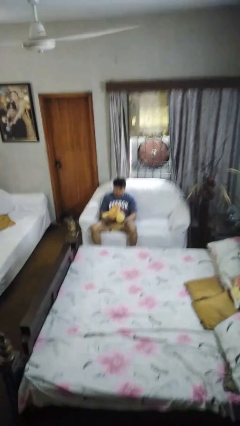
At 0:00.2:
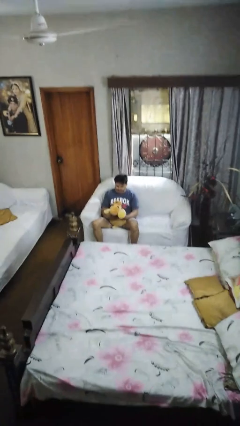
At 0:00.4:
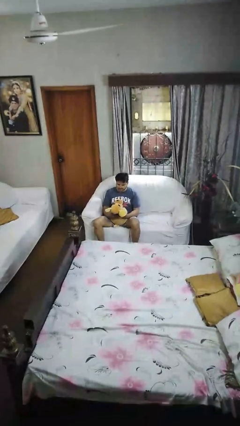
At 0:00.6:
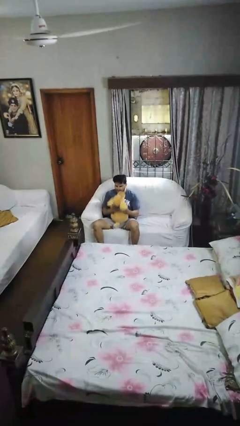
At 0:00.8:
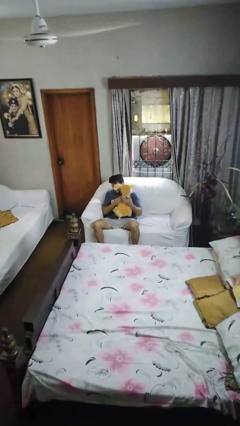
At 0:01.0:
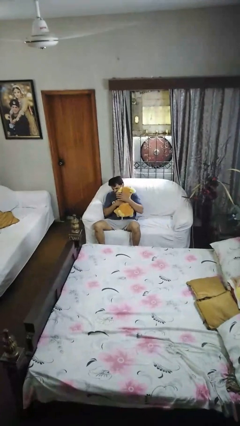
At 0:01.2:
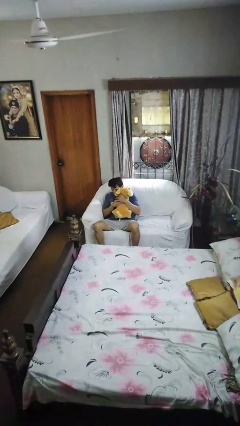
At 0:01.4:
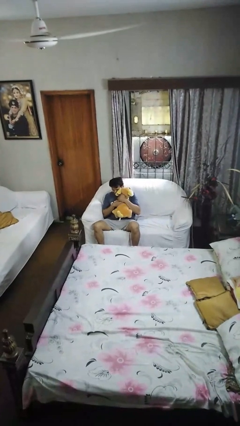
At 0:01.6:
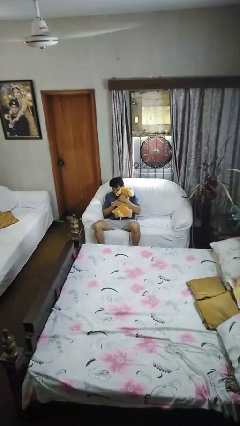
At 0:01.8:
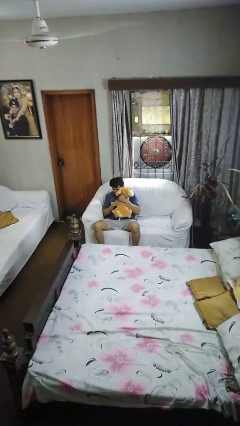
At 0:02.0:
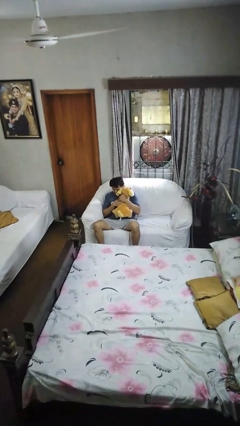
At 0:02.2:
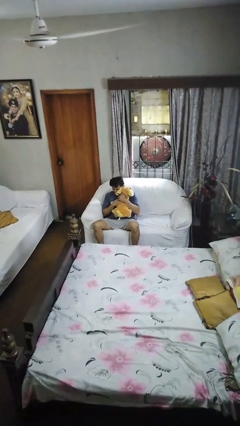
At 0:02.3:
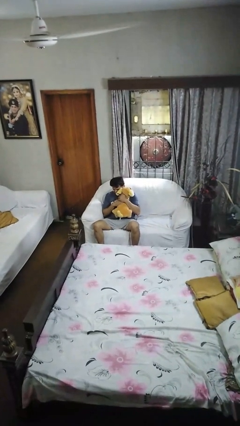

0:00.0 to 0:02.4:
person hugs stuffed animal

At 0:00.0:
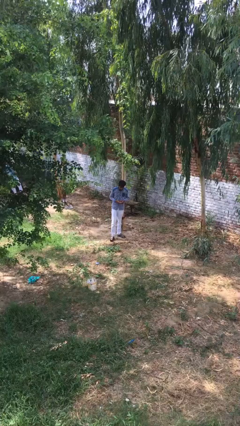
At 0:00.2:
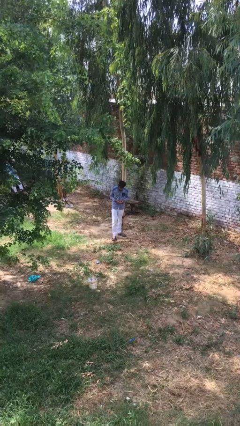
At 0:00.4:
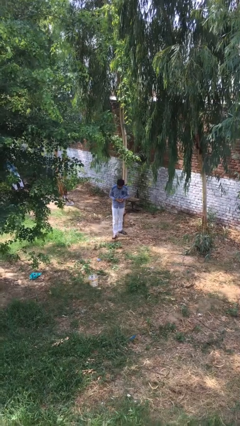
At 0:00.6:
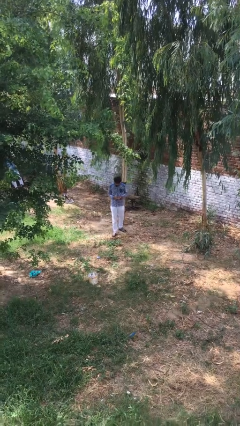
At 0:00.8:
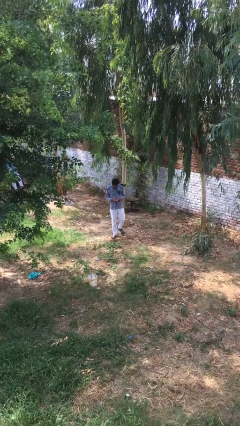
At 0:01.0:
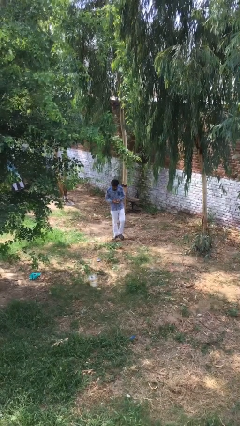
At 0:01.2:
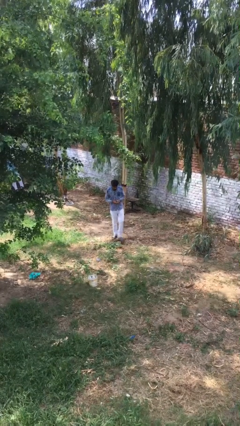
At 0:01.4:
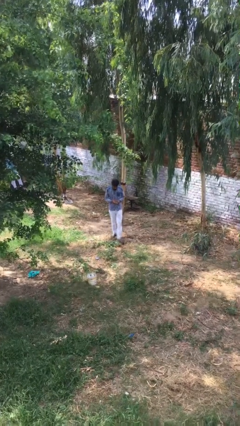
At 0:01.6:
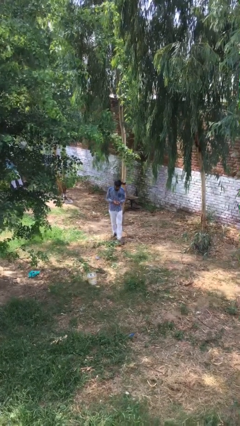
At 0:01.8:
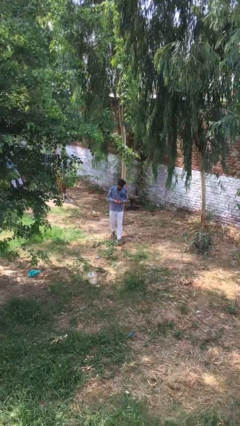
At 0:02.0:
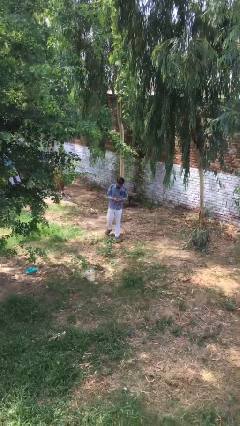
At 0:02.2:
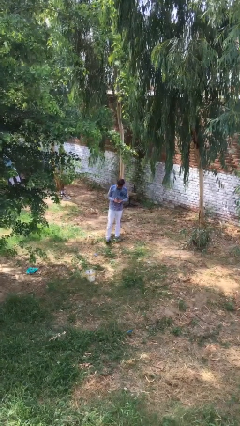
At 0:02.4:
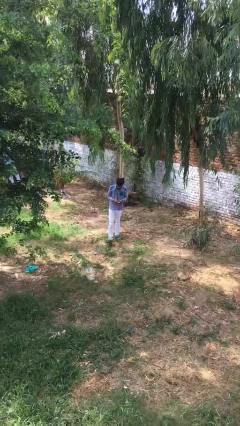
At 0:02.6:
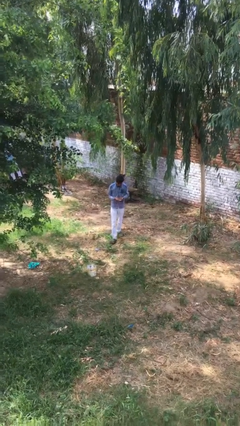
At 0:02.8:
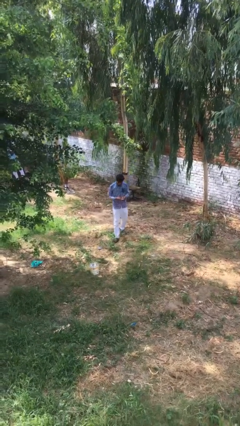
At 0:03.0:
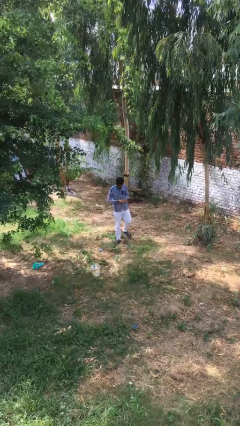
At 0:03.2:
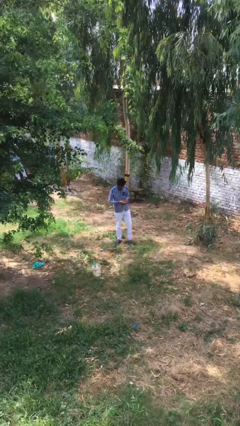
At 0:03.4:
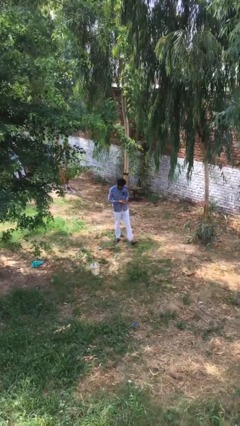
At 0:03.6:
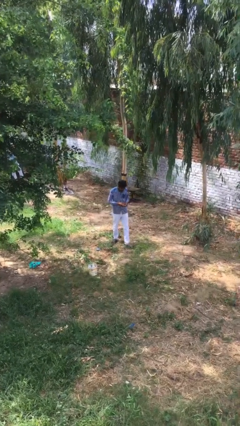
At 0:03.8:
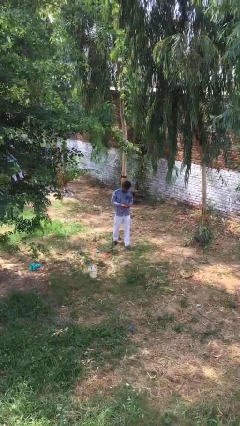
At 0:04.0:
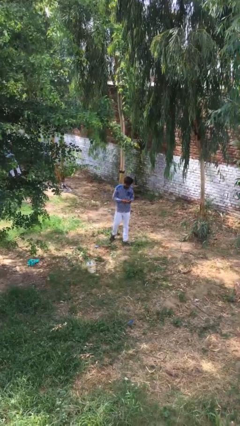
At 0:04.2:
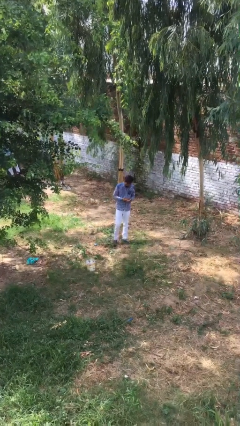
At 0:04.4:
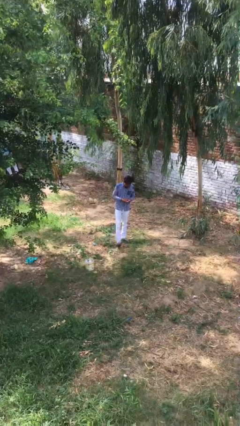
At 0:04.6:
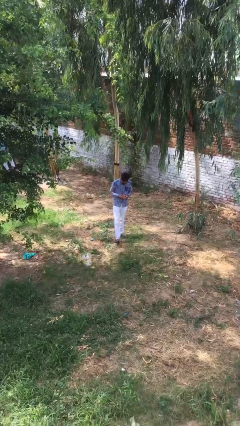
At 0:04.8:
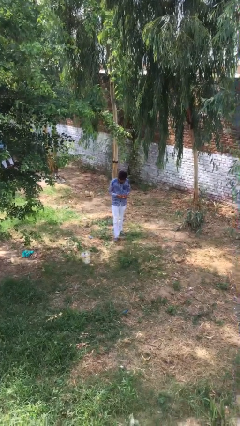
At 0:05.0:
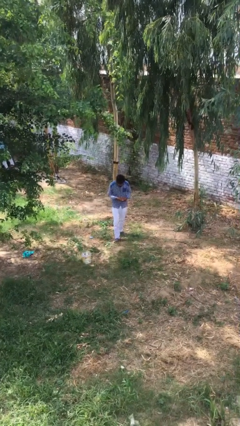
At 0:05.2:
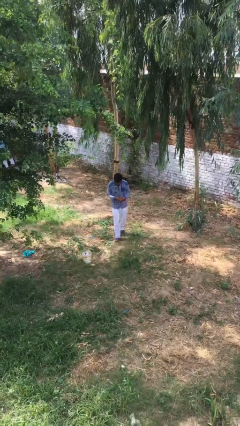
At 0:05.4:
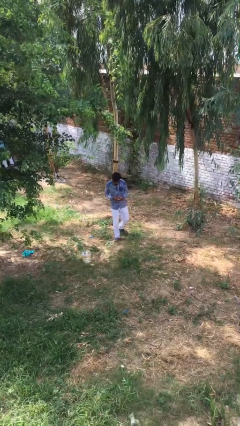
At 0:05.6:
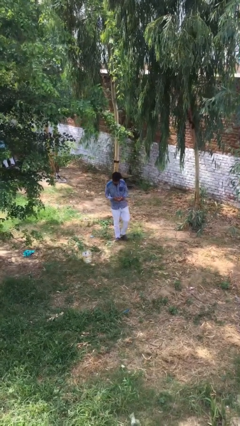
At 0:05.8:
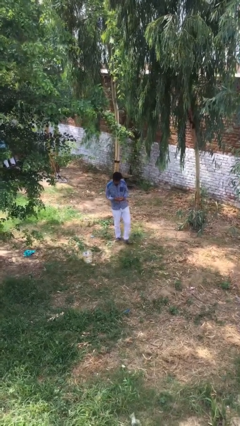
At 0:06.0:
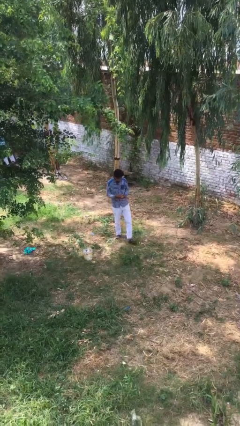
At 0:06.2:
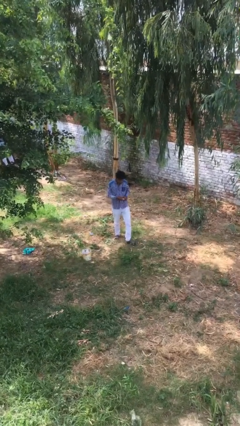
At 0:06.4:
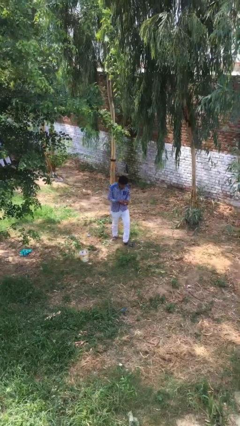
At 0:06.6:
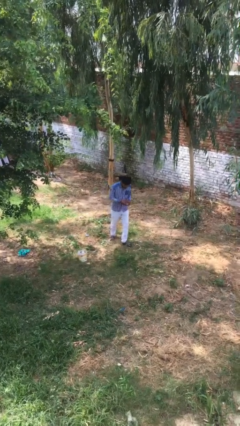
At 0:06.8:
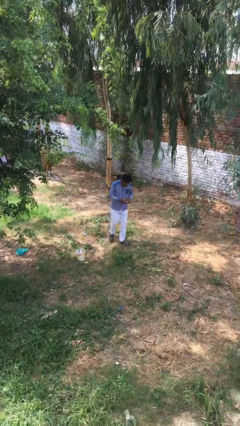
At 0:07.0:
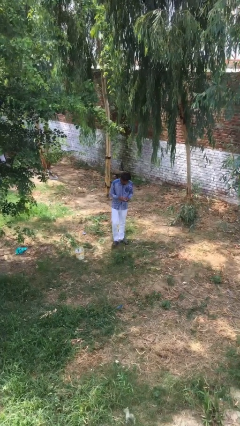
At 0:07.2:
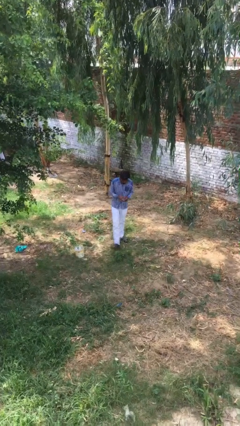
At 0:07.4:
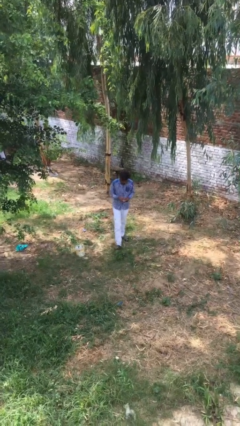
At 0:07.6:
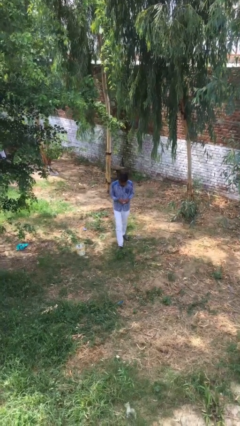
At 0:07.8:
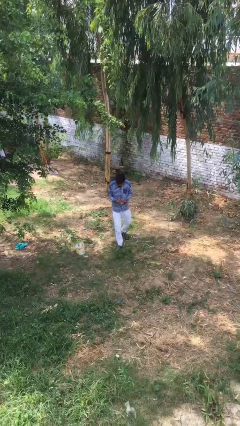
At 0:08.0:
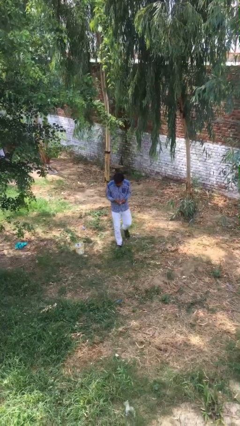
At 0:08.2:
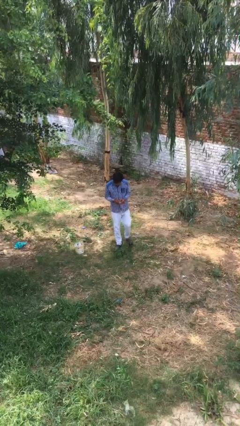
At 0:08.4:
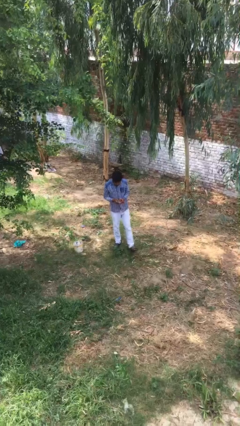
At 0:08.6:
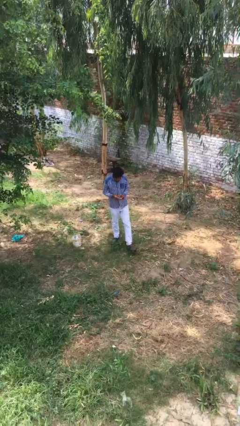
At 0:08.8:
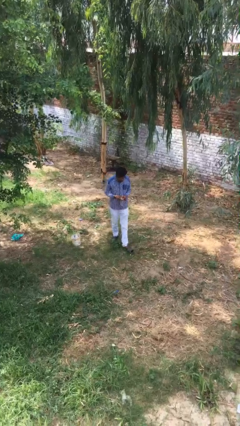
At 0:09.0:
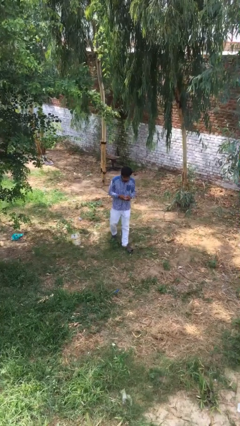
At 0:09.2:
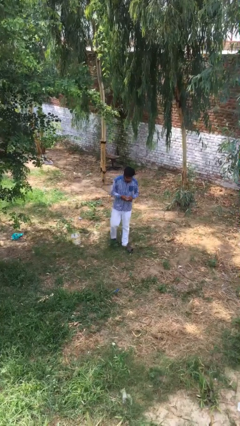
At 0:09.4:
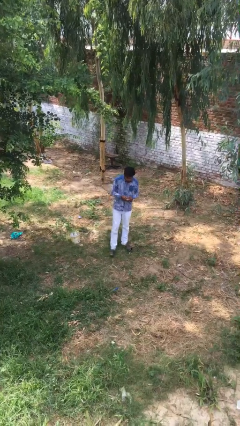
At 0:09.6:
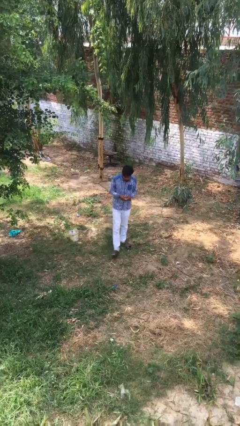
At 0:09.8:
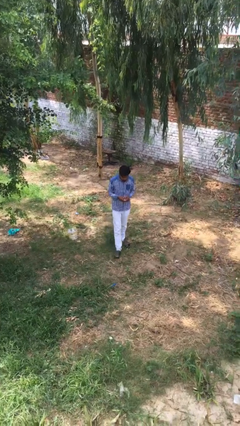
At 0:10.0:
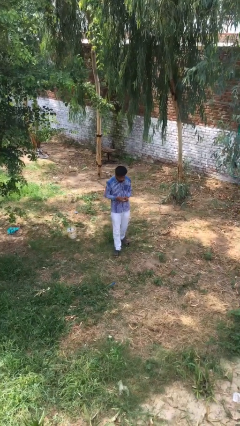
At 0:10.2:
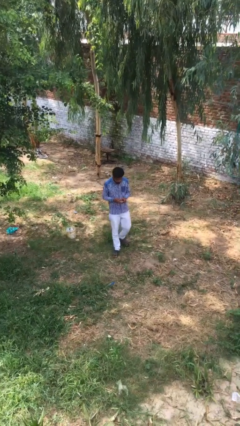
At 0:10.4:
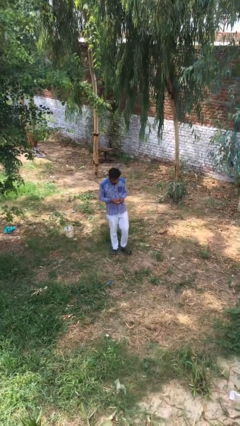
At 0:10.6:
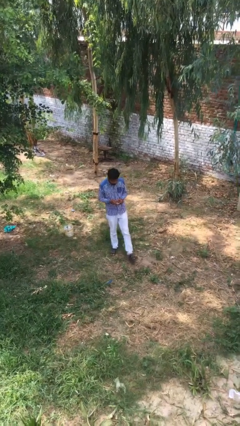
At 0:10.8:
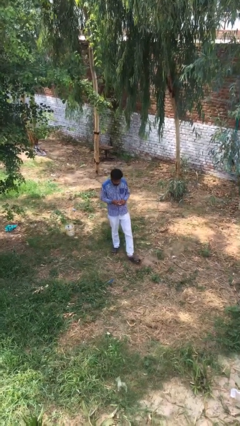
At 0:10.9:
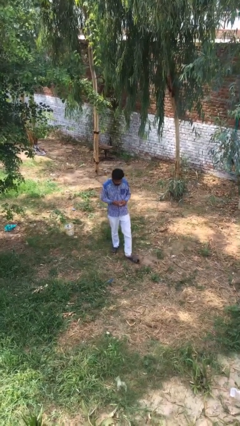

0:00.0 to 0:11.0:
person texts on phone

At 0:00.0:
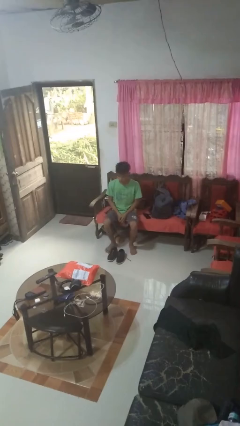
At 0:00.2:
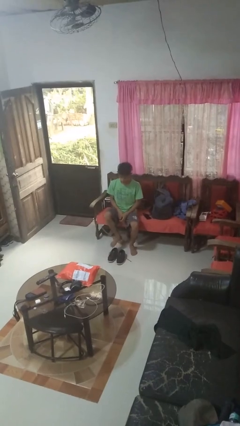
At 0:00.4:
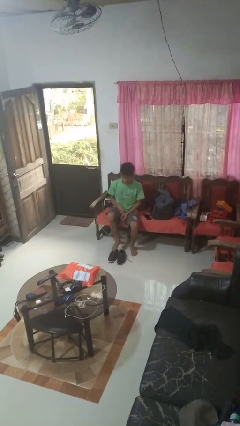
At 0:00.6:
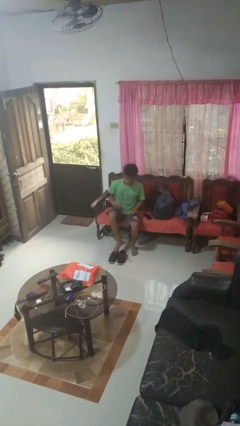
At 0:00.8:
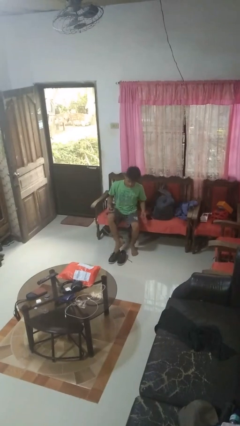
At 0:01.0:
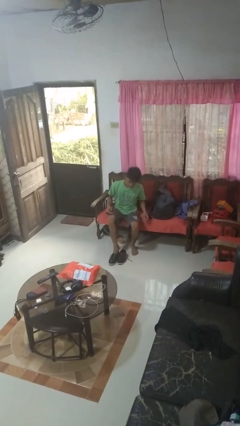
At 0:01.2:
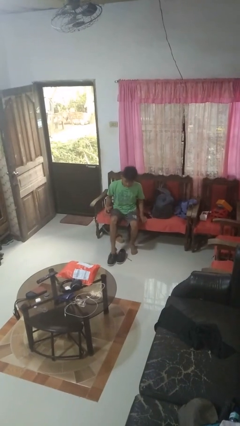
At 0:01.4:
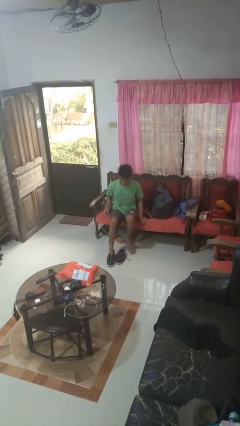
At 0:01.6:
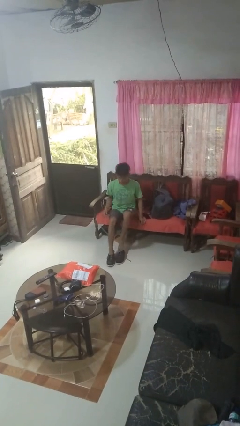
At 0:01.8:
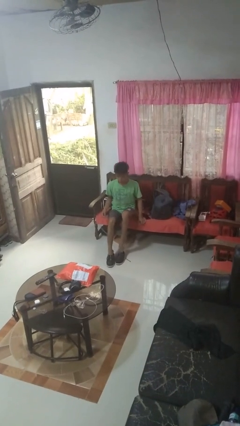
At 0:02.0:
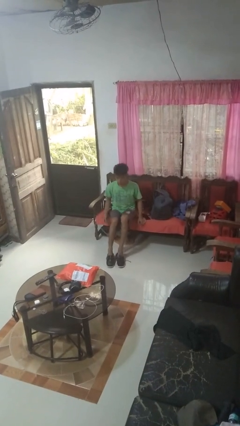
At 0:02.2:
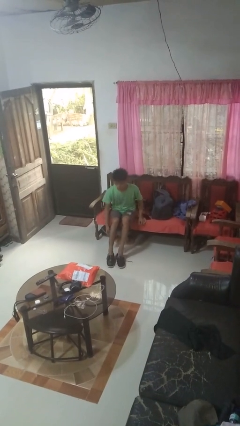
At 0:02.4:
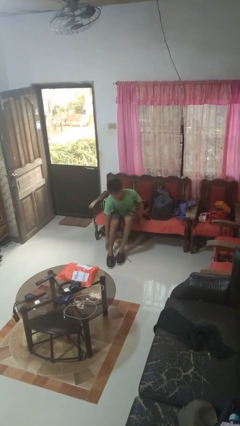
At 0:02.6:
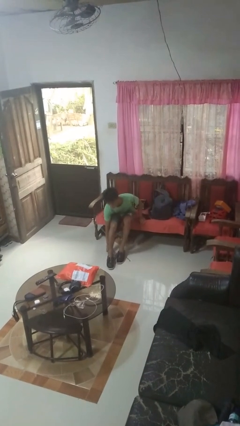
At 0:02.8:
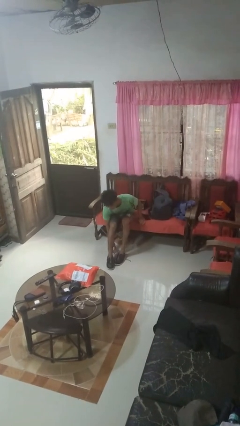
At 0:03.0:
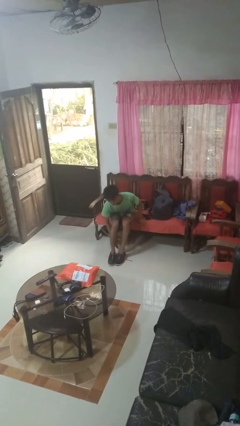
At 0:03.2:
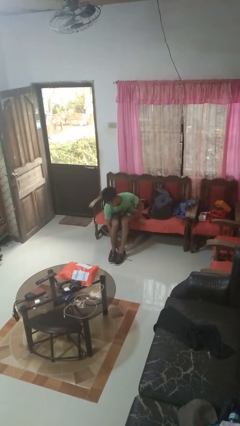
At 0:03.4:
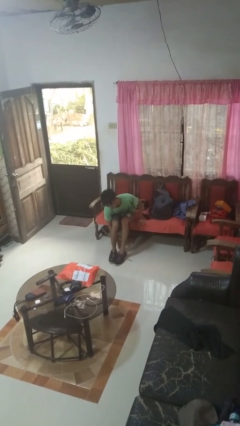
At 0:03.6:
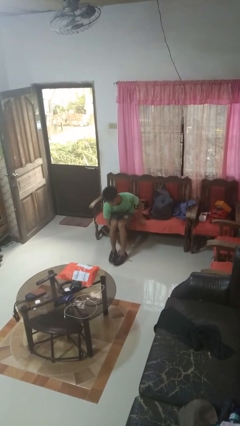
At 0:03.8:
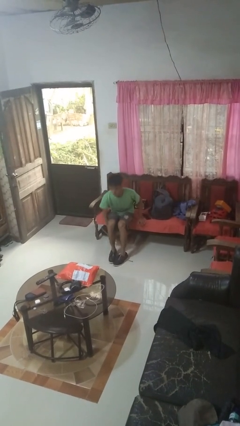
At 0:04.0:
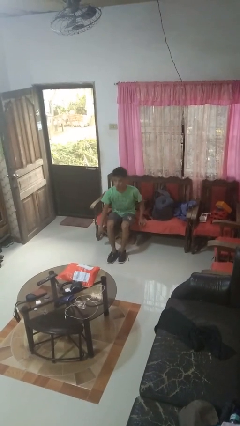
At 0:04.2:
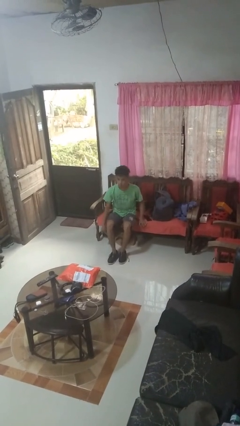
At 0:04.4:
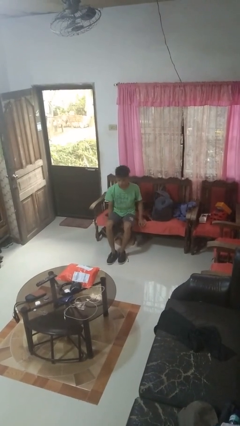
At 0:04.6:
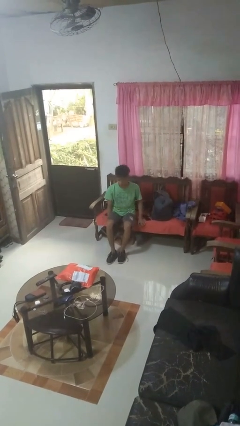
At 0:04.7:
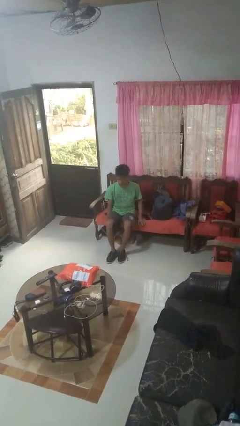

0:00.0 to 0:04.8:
person puts on shoes
